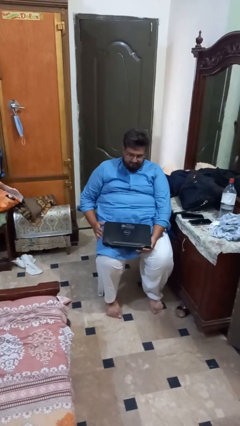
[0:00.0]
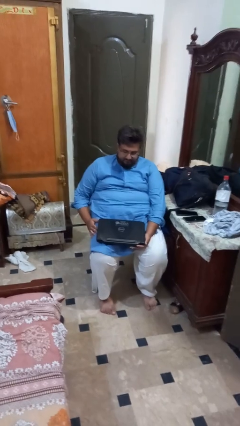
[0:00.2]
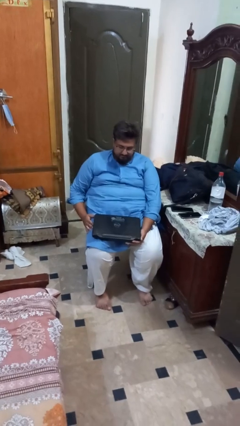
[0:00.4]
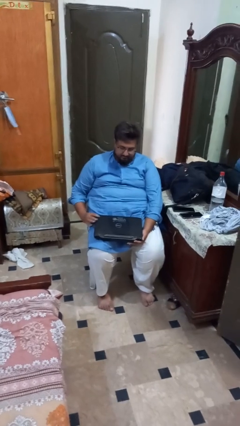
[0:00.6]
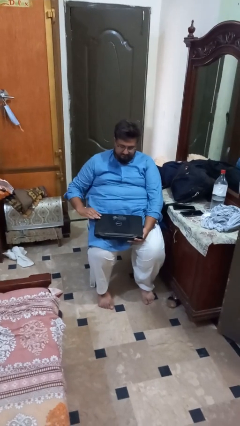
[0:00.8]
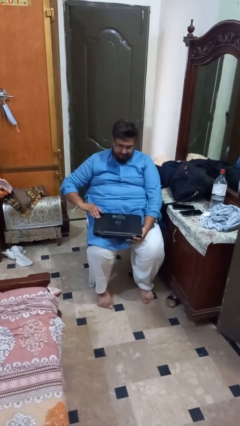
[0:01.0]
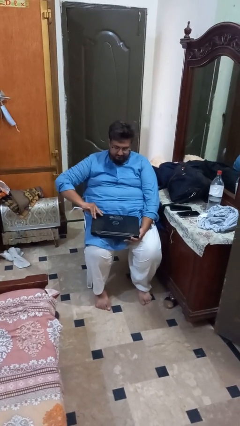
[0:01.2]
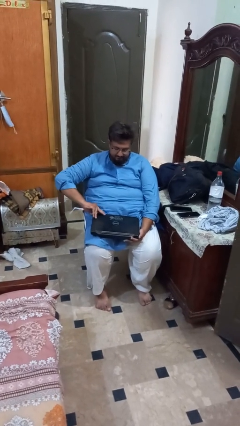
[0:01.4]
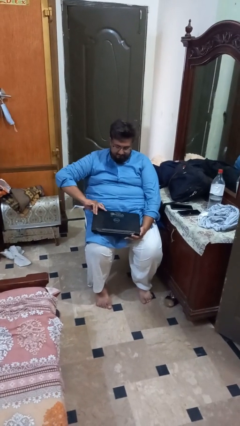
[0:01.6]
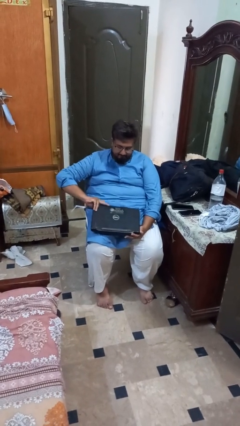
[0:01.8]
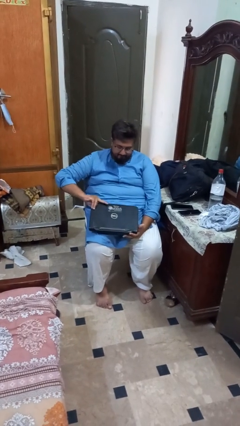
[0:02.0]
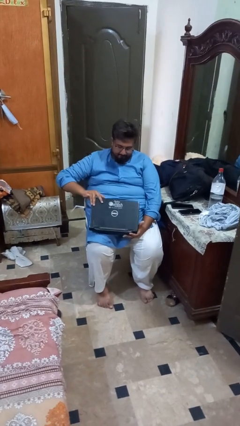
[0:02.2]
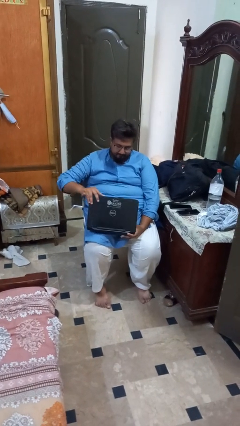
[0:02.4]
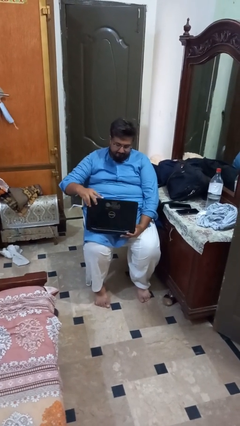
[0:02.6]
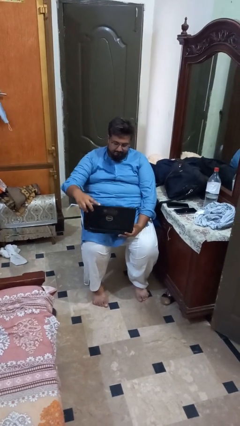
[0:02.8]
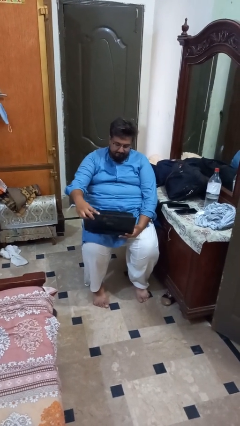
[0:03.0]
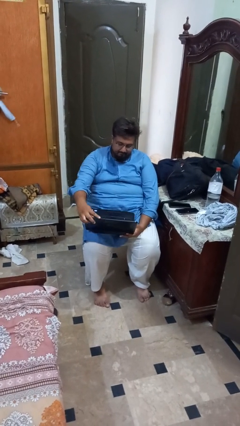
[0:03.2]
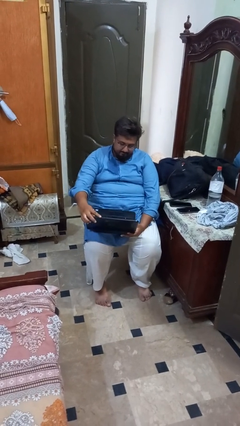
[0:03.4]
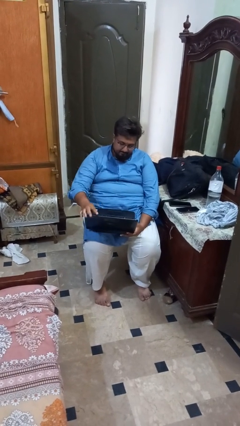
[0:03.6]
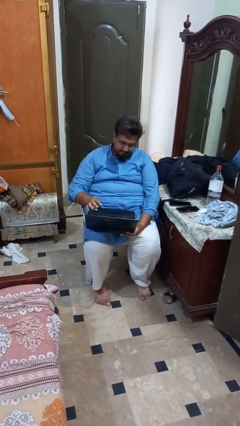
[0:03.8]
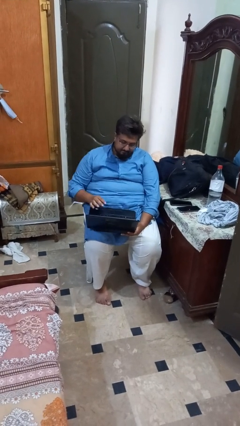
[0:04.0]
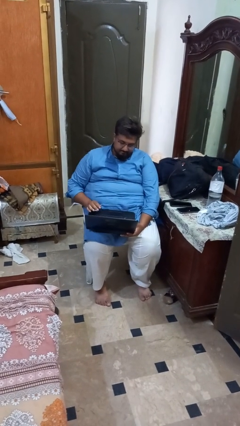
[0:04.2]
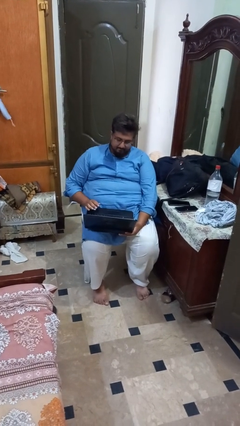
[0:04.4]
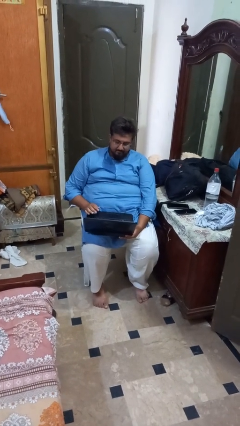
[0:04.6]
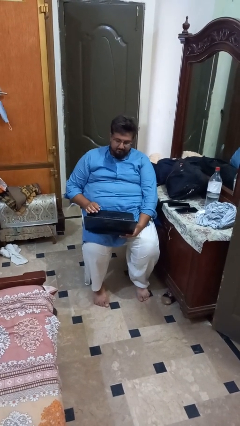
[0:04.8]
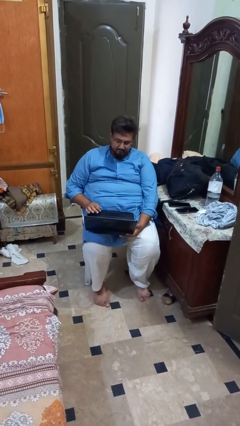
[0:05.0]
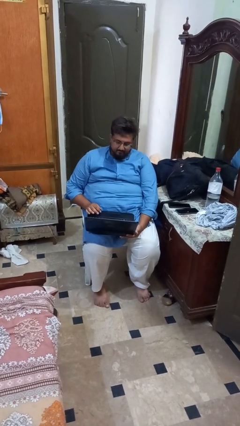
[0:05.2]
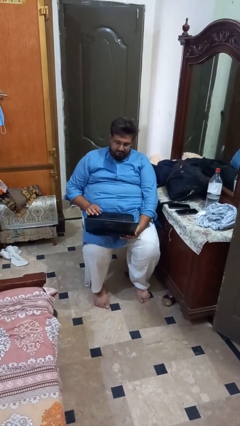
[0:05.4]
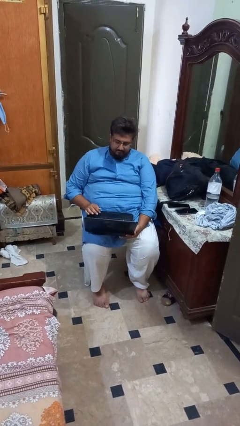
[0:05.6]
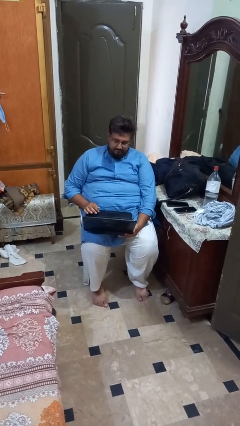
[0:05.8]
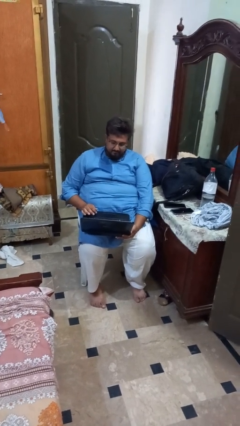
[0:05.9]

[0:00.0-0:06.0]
person opens laptop

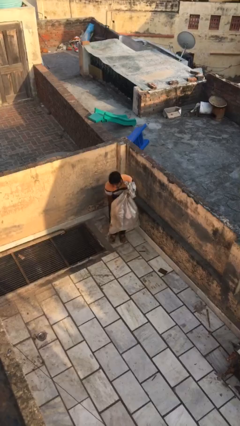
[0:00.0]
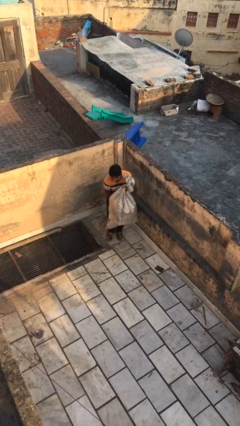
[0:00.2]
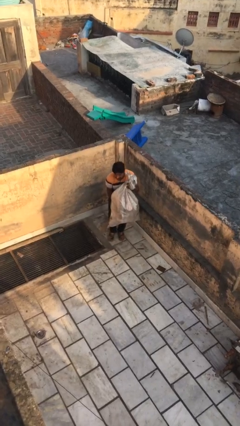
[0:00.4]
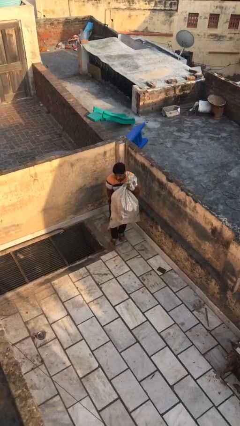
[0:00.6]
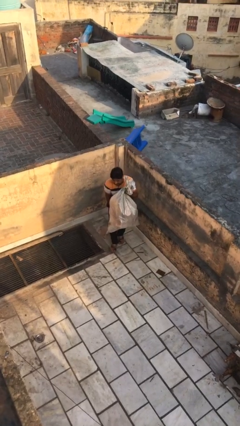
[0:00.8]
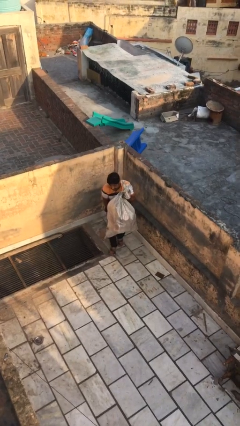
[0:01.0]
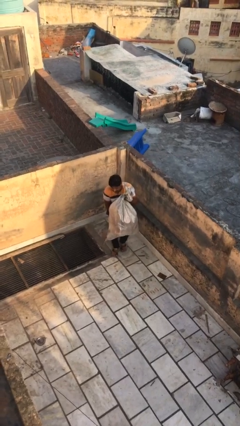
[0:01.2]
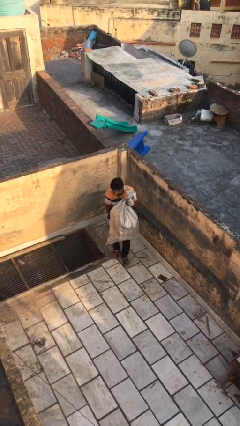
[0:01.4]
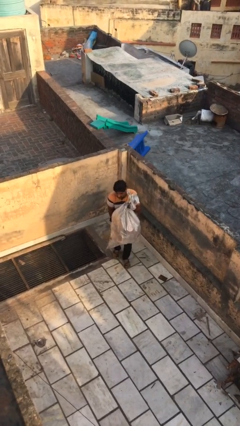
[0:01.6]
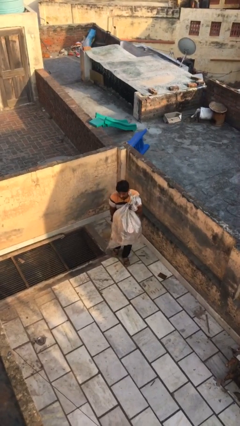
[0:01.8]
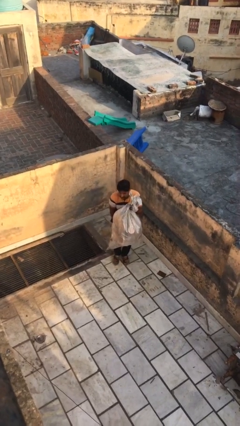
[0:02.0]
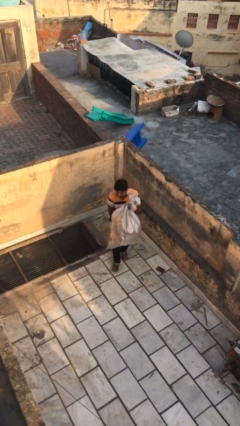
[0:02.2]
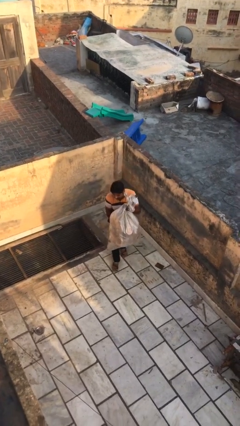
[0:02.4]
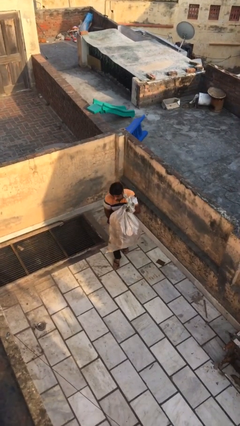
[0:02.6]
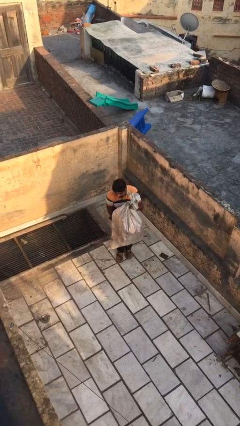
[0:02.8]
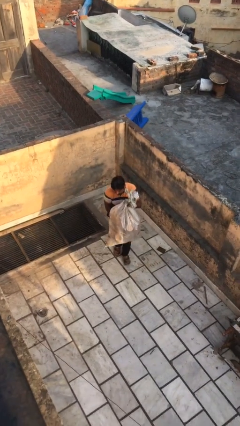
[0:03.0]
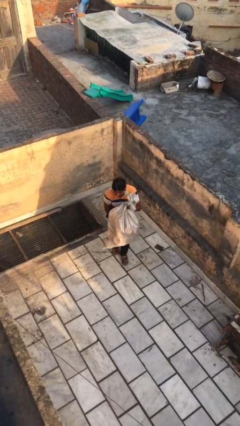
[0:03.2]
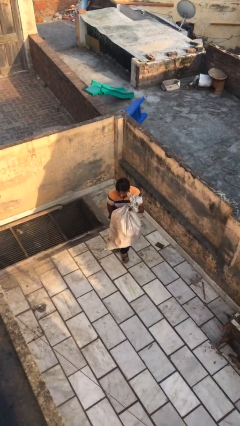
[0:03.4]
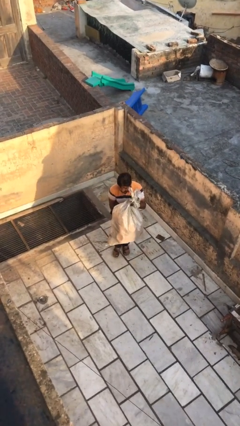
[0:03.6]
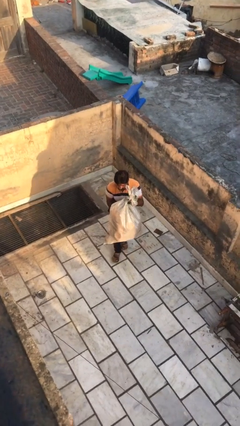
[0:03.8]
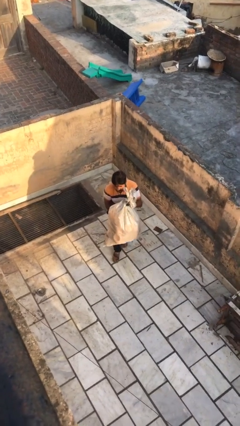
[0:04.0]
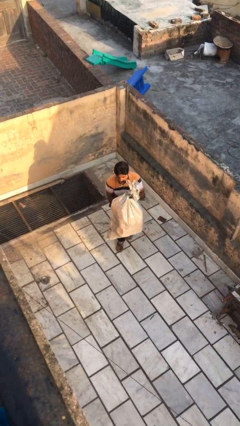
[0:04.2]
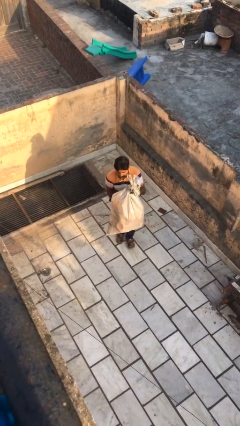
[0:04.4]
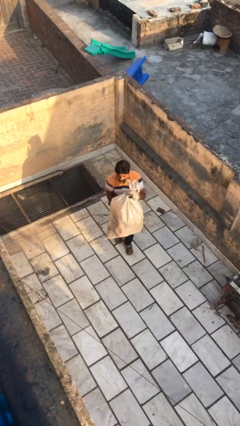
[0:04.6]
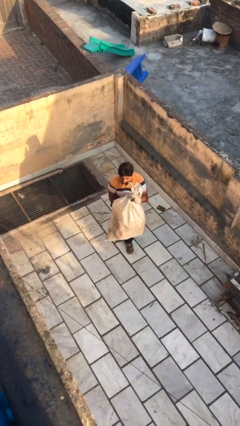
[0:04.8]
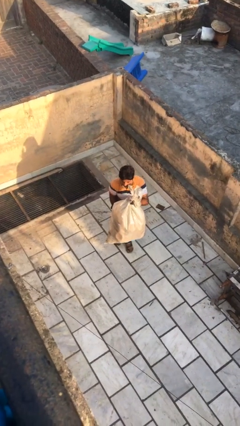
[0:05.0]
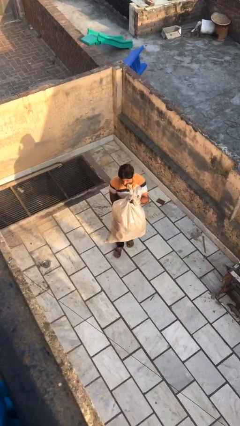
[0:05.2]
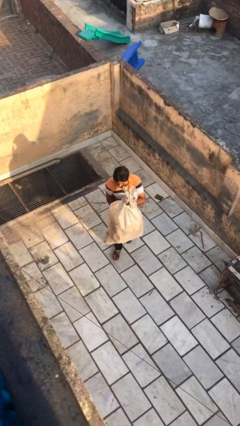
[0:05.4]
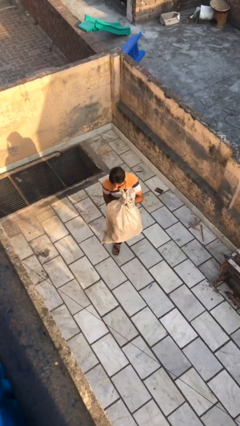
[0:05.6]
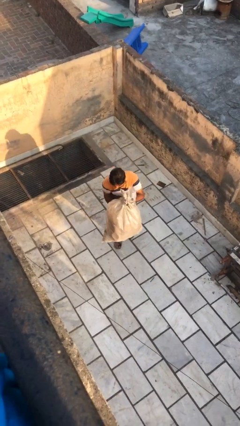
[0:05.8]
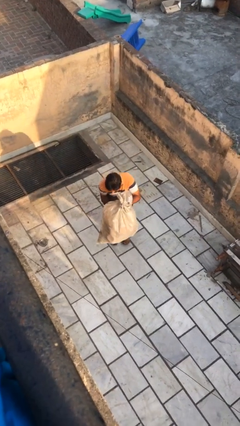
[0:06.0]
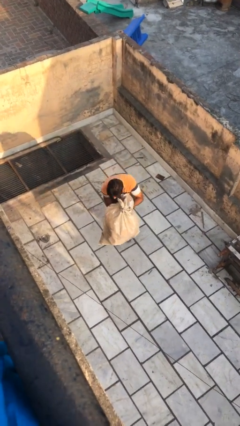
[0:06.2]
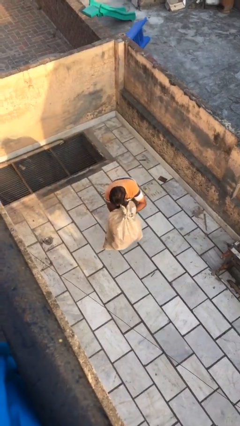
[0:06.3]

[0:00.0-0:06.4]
person carries heavy object

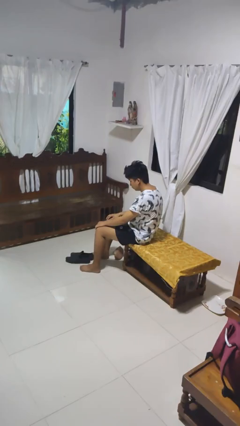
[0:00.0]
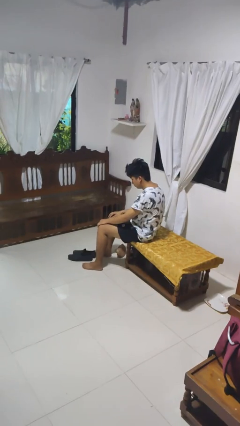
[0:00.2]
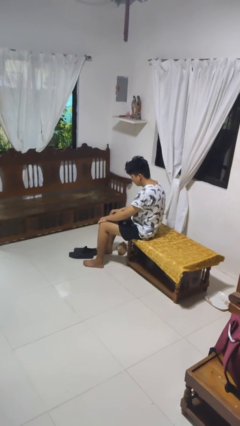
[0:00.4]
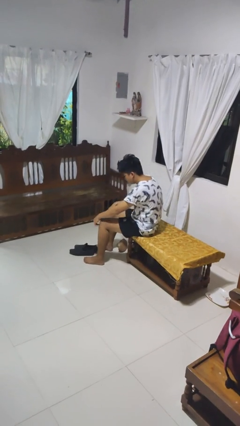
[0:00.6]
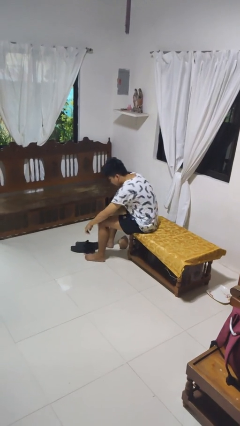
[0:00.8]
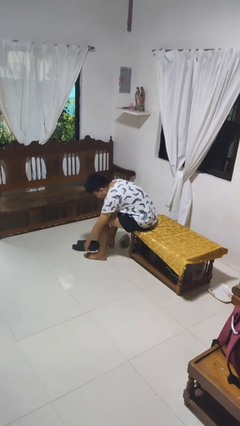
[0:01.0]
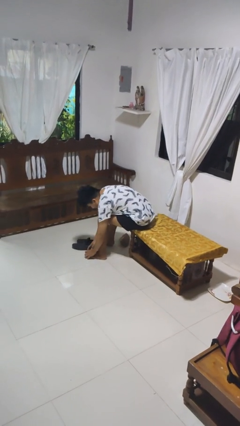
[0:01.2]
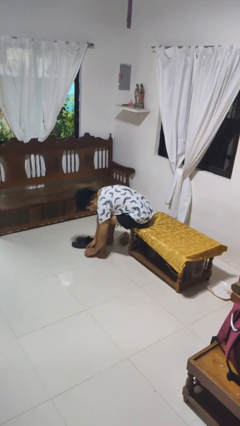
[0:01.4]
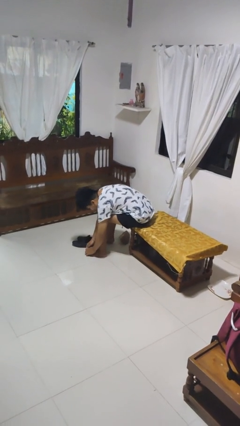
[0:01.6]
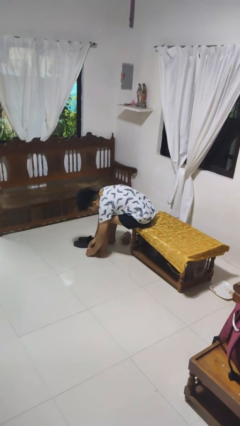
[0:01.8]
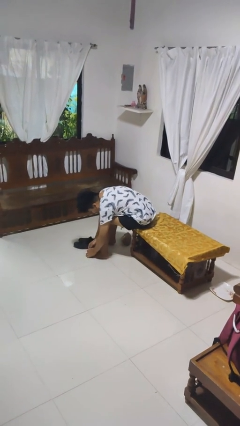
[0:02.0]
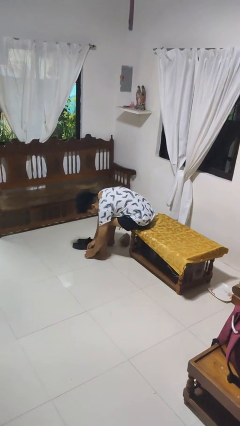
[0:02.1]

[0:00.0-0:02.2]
person rubs foot

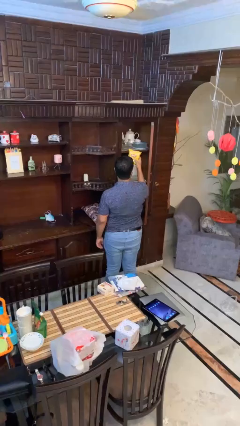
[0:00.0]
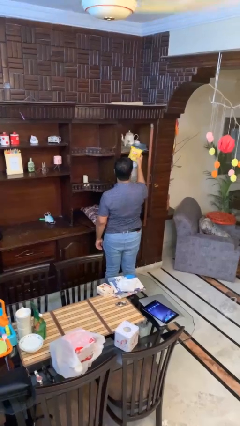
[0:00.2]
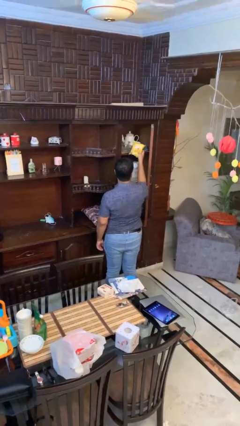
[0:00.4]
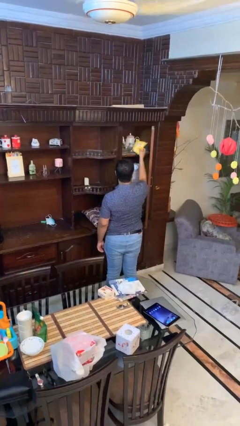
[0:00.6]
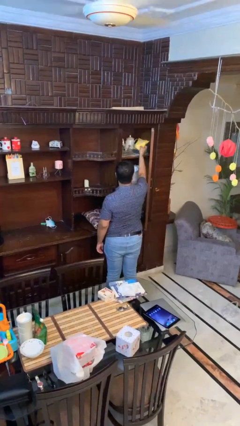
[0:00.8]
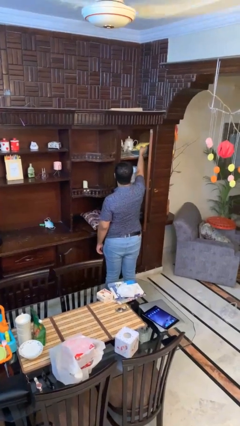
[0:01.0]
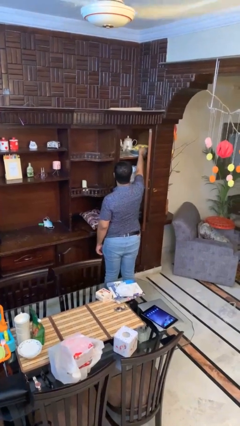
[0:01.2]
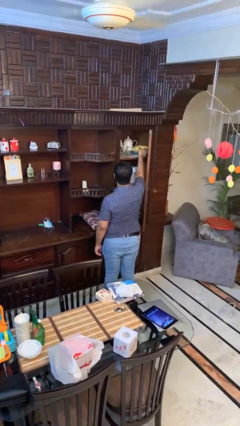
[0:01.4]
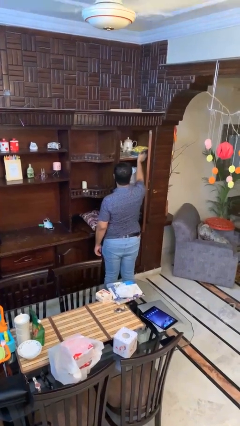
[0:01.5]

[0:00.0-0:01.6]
person puts down object into cabinet

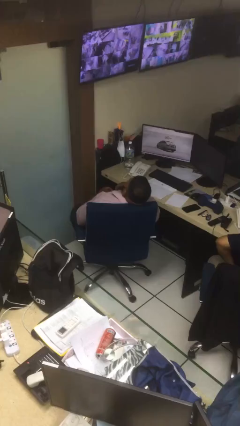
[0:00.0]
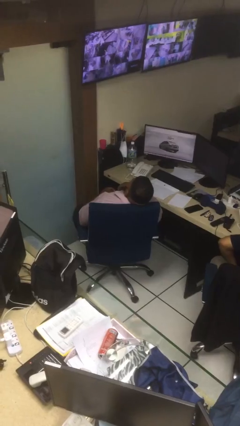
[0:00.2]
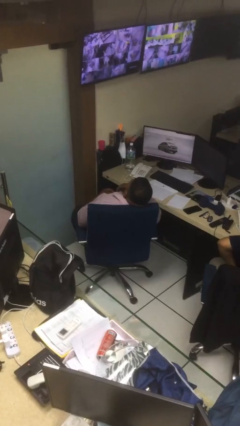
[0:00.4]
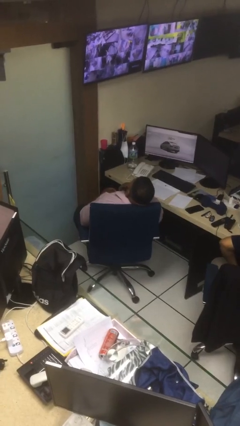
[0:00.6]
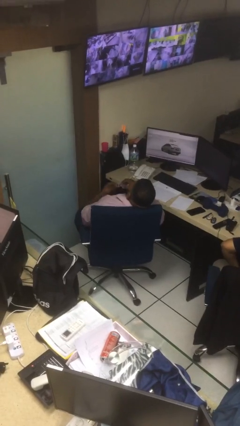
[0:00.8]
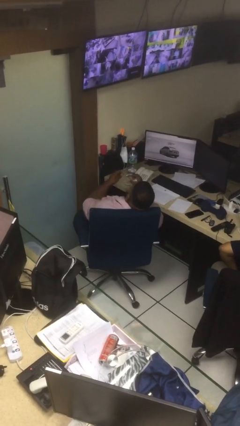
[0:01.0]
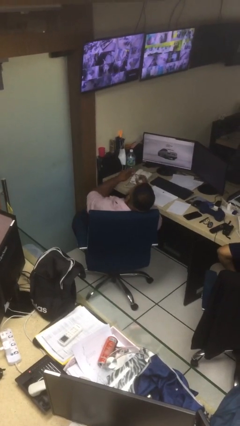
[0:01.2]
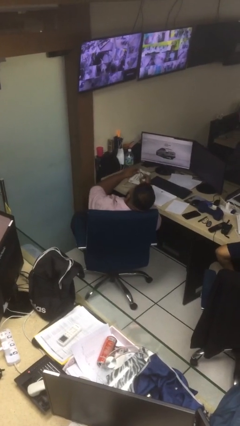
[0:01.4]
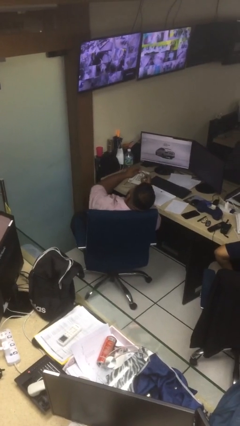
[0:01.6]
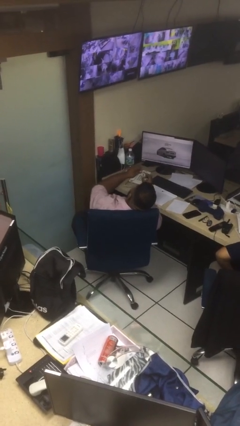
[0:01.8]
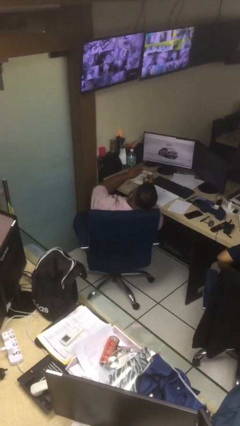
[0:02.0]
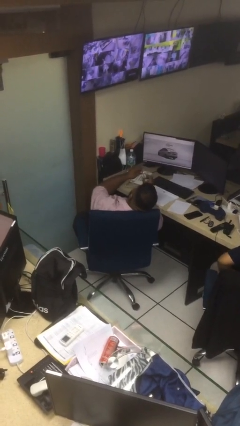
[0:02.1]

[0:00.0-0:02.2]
person clips fingernails
